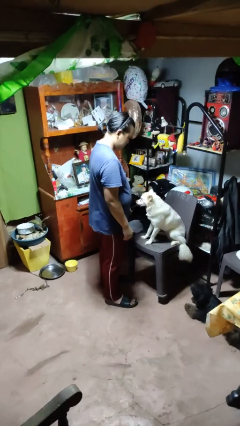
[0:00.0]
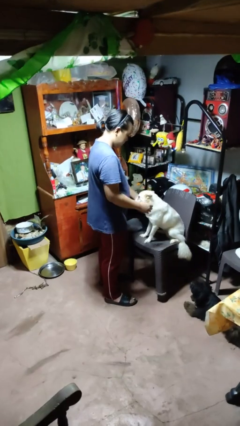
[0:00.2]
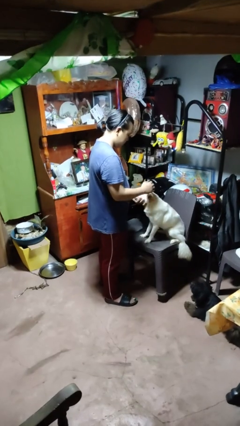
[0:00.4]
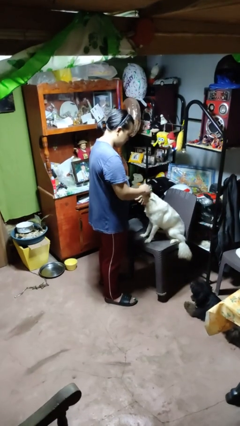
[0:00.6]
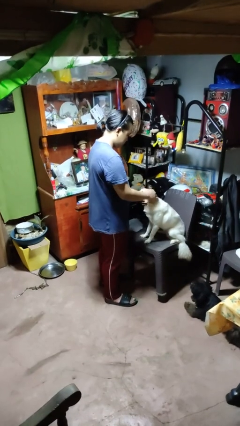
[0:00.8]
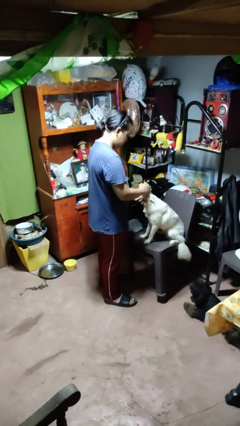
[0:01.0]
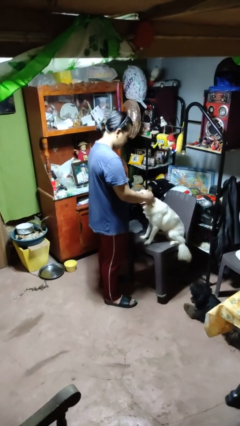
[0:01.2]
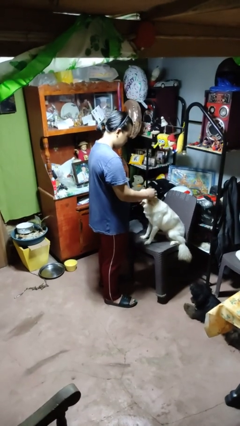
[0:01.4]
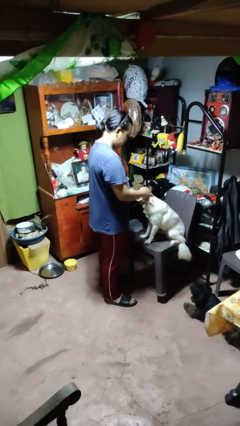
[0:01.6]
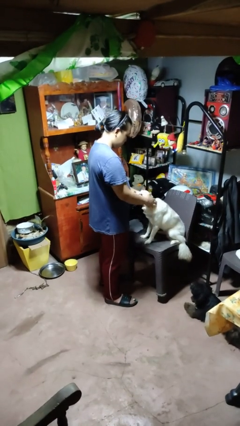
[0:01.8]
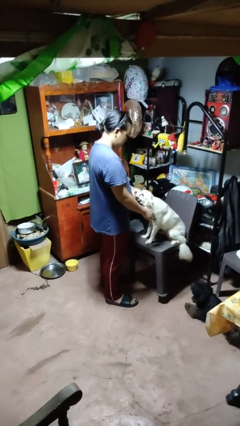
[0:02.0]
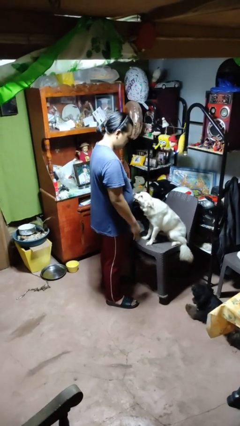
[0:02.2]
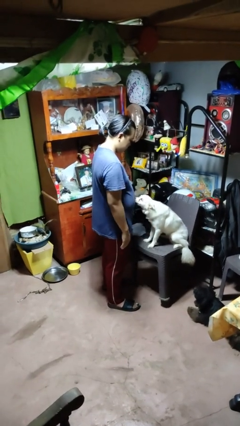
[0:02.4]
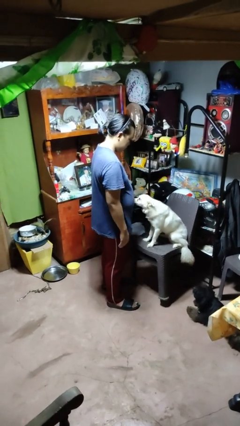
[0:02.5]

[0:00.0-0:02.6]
person pets dog

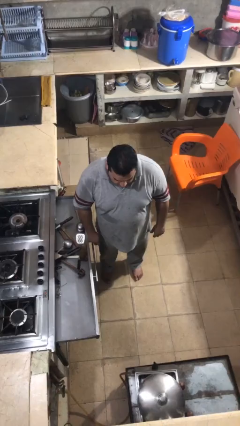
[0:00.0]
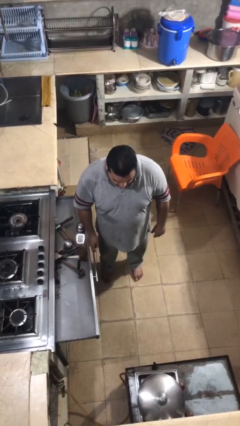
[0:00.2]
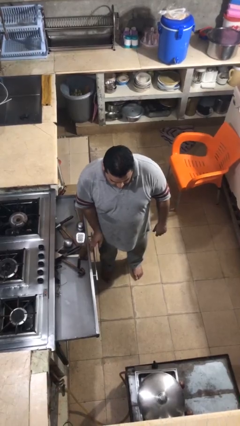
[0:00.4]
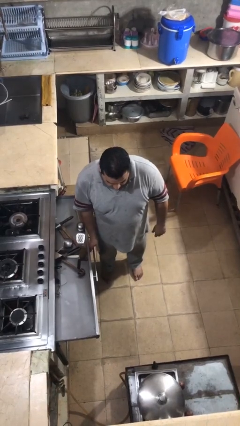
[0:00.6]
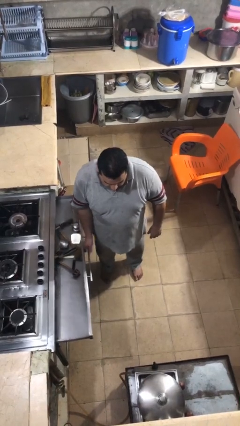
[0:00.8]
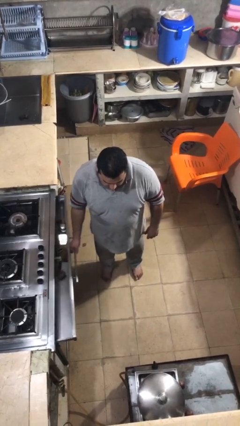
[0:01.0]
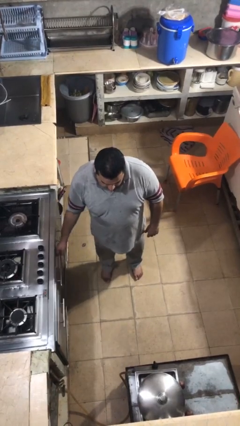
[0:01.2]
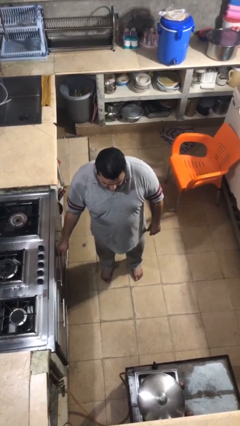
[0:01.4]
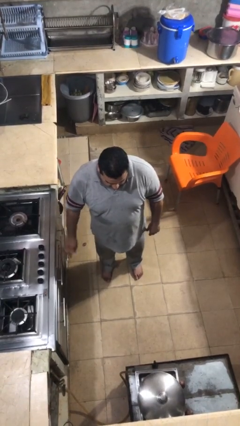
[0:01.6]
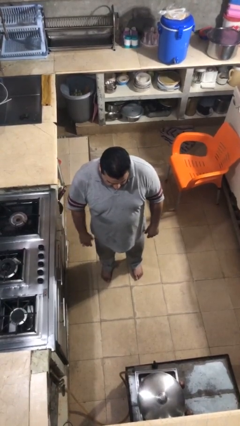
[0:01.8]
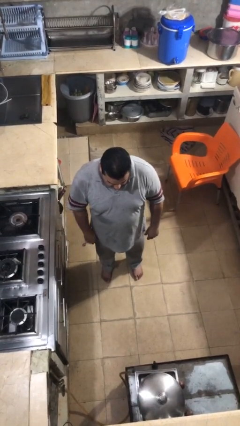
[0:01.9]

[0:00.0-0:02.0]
person closes kitchen drawer

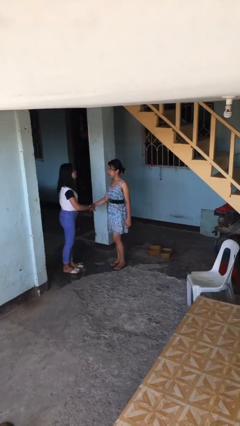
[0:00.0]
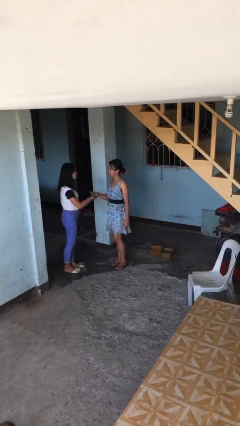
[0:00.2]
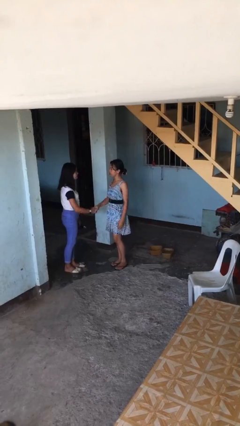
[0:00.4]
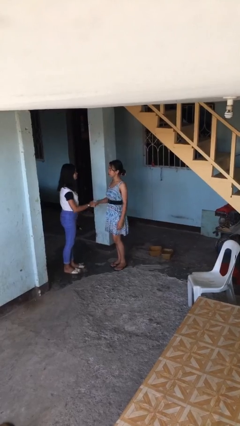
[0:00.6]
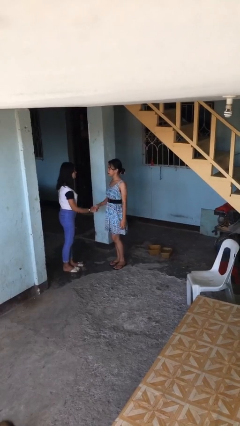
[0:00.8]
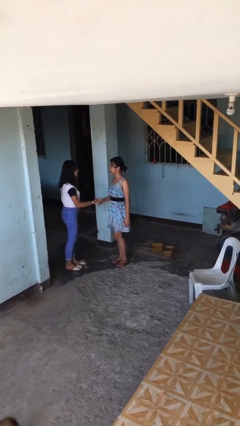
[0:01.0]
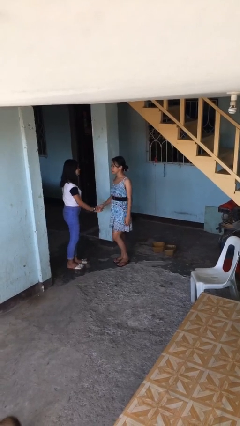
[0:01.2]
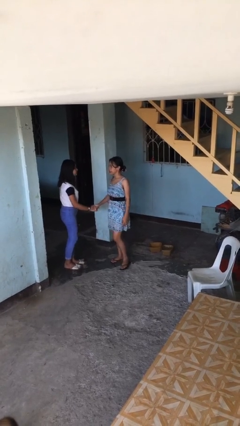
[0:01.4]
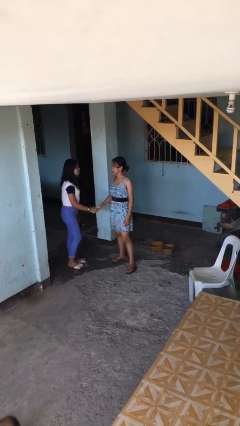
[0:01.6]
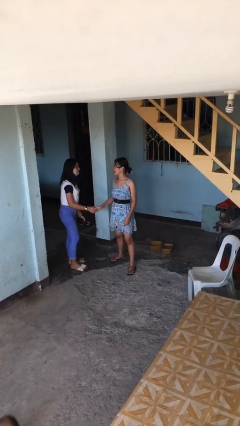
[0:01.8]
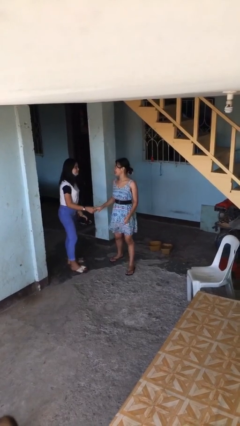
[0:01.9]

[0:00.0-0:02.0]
person shakes hand

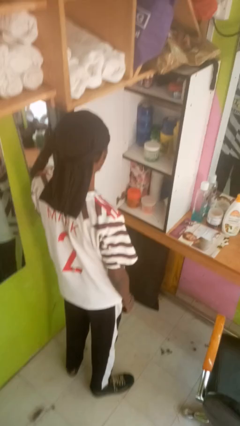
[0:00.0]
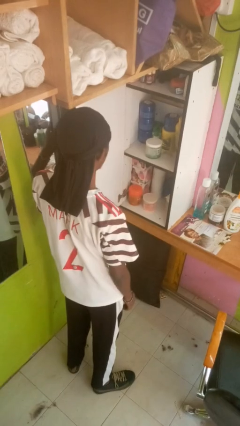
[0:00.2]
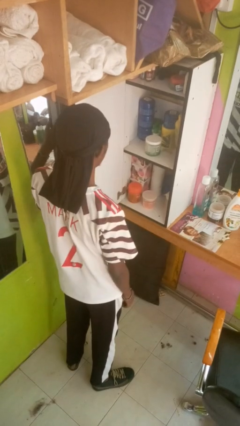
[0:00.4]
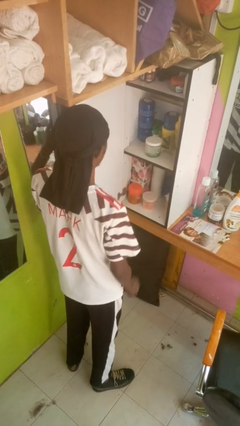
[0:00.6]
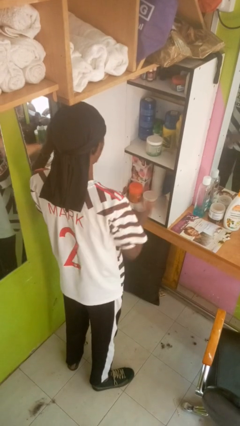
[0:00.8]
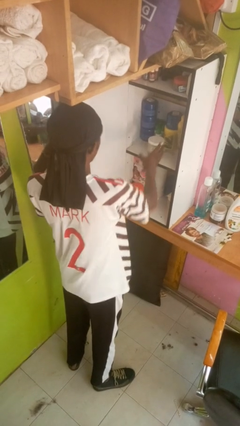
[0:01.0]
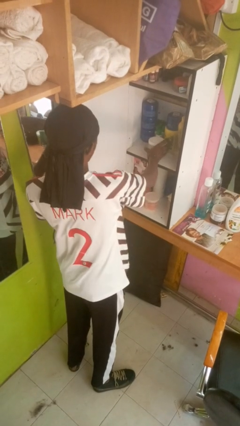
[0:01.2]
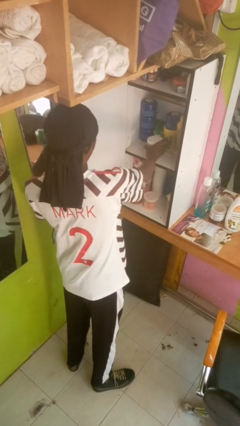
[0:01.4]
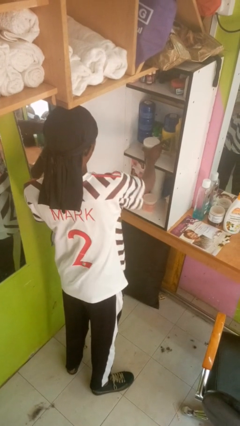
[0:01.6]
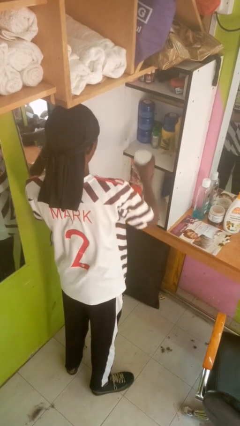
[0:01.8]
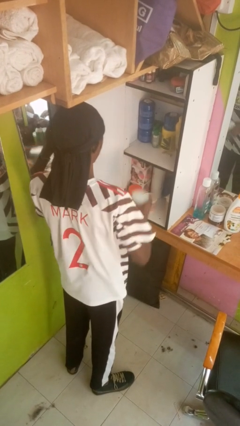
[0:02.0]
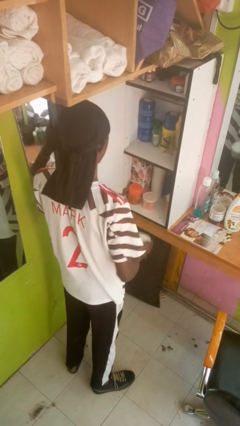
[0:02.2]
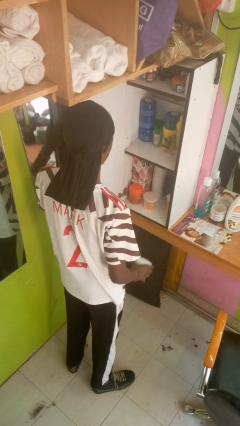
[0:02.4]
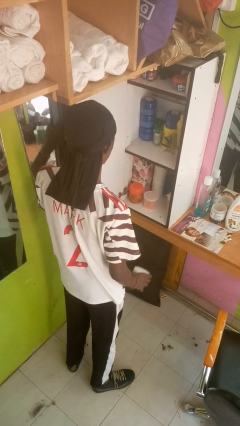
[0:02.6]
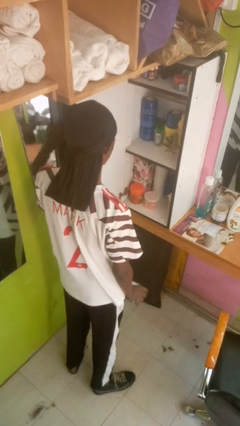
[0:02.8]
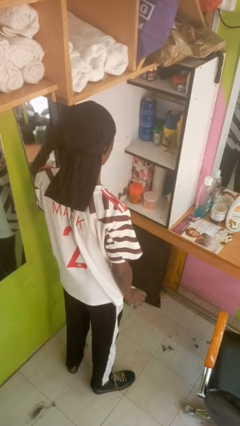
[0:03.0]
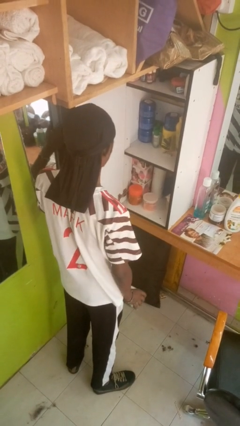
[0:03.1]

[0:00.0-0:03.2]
person picks up object from cabinet

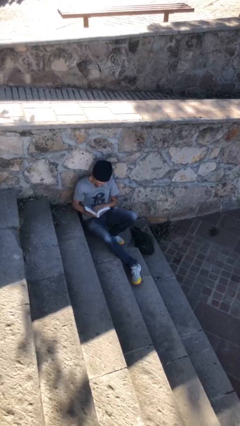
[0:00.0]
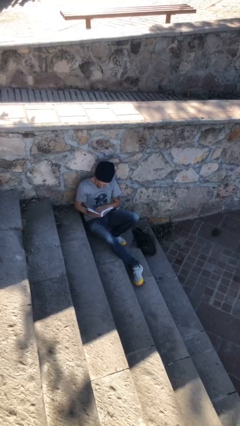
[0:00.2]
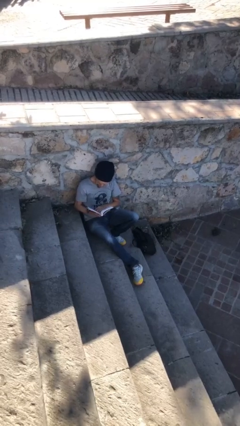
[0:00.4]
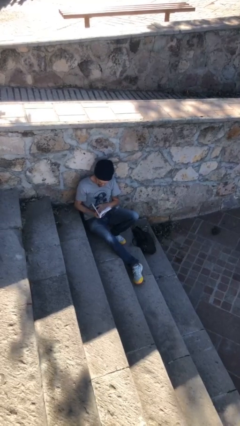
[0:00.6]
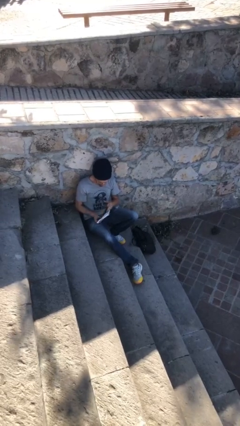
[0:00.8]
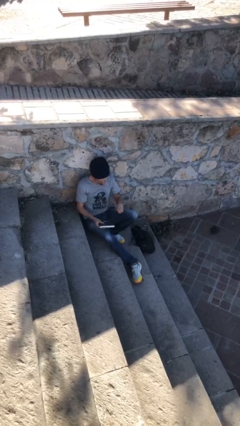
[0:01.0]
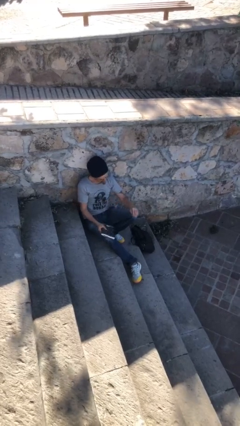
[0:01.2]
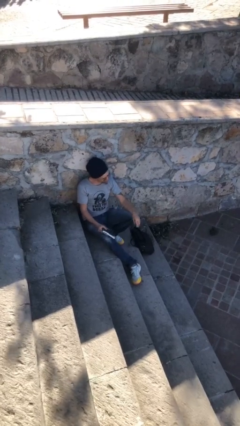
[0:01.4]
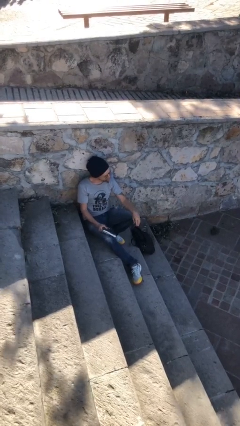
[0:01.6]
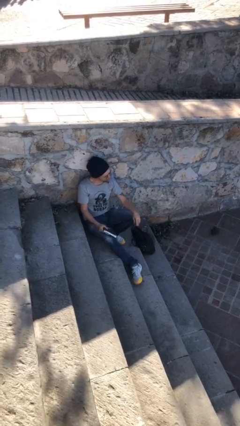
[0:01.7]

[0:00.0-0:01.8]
person reads document

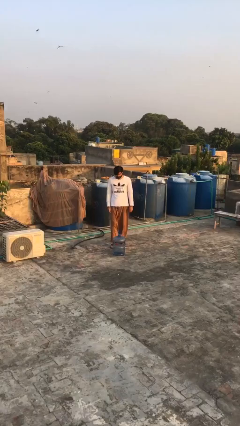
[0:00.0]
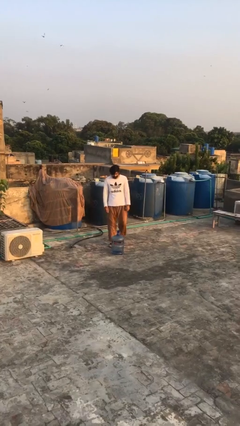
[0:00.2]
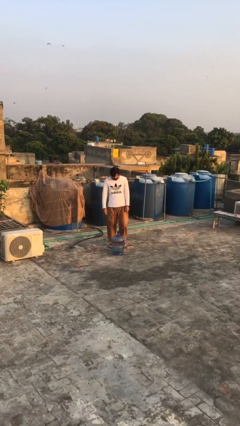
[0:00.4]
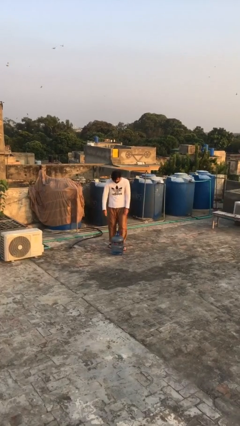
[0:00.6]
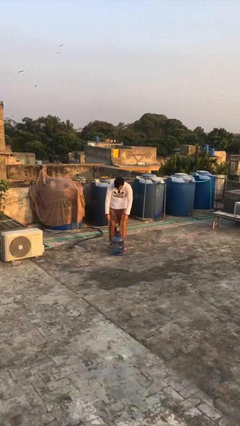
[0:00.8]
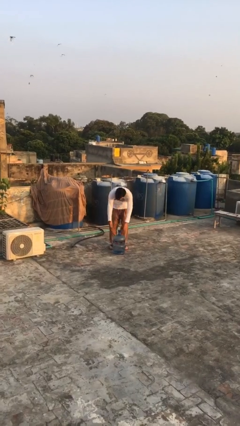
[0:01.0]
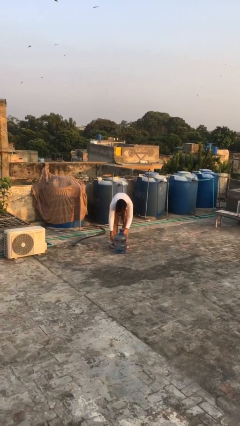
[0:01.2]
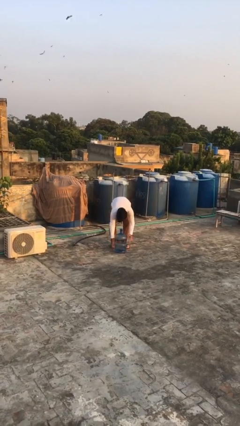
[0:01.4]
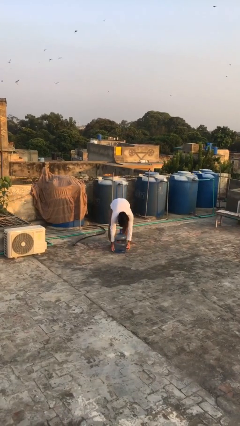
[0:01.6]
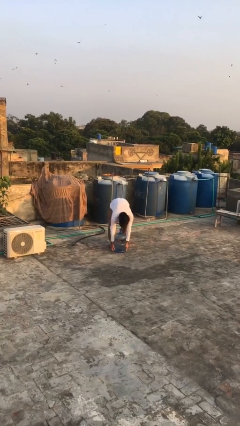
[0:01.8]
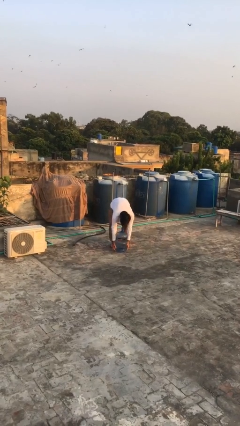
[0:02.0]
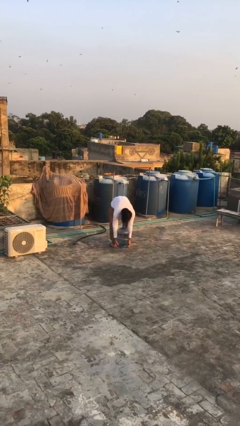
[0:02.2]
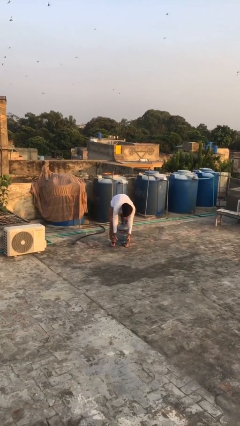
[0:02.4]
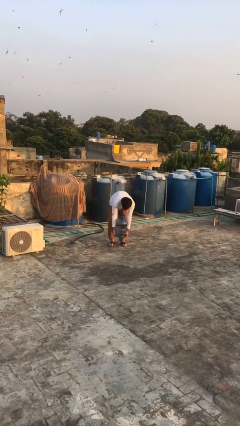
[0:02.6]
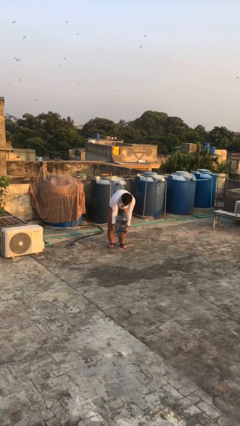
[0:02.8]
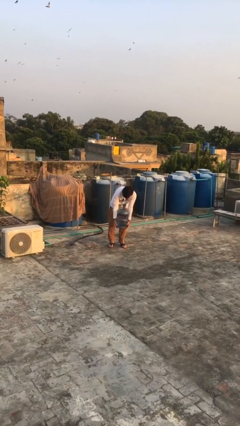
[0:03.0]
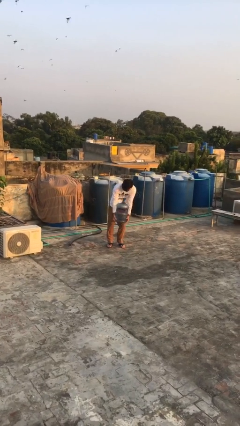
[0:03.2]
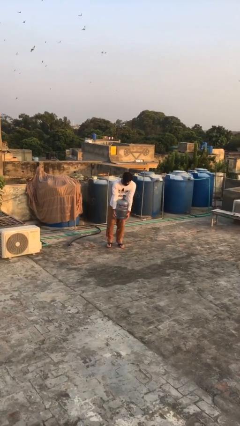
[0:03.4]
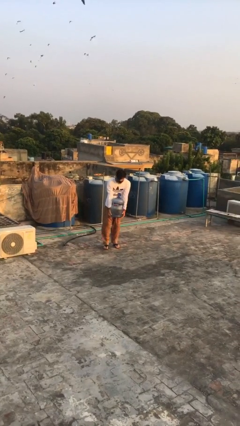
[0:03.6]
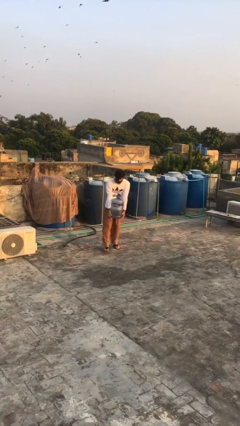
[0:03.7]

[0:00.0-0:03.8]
person picks up object from floor

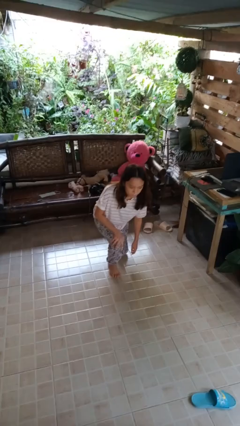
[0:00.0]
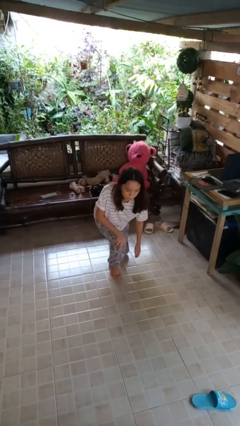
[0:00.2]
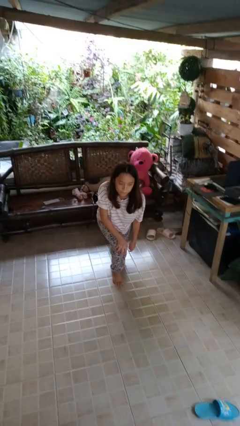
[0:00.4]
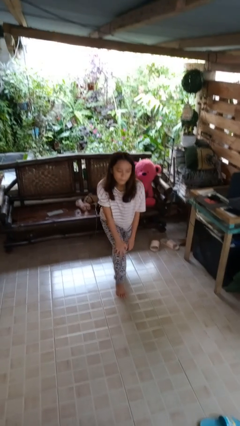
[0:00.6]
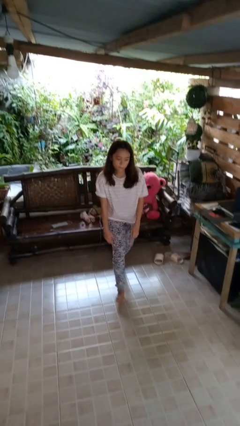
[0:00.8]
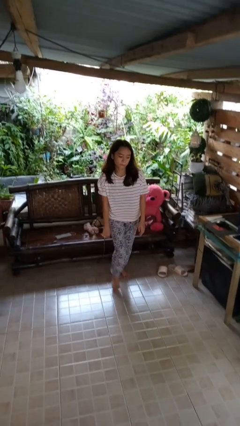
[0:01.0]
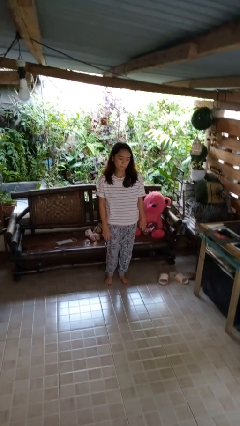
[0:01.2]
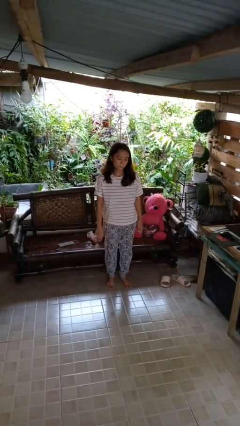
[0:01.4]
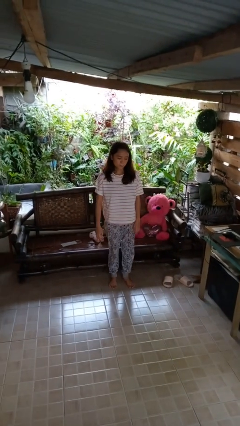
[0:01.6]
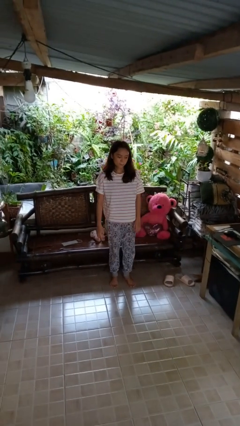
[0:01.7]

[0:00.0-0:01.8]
person stands up from floor
